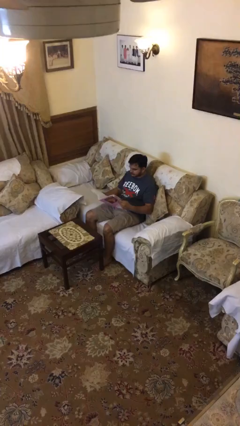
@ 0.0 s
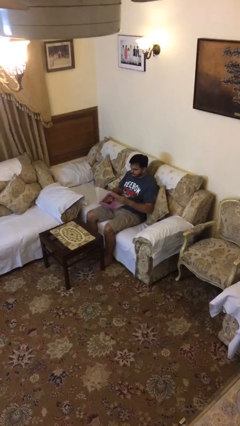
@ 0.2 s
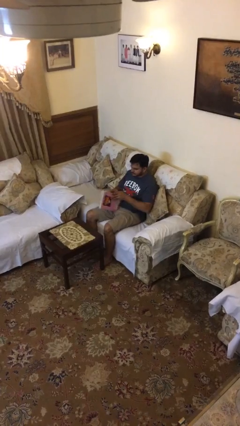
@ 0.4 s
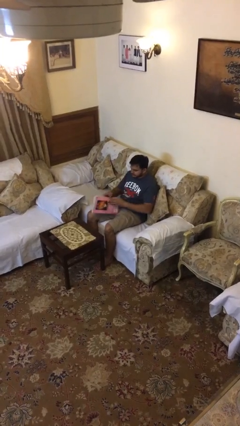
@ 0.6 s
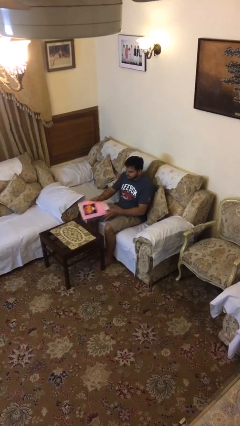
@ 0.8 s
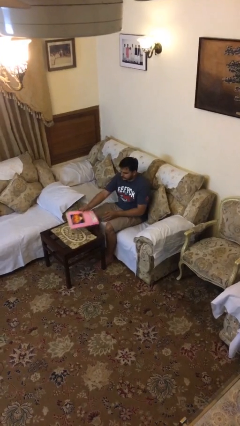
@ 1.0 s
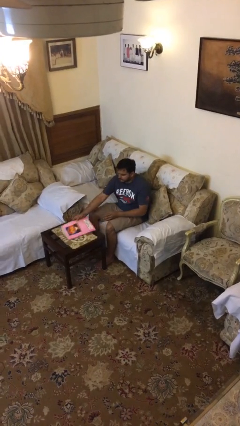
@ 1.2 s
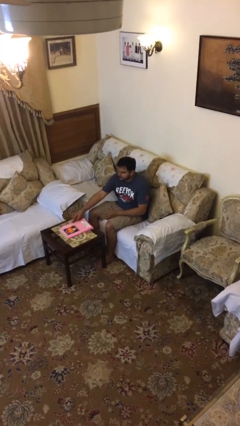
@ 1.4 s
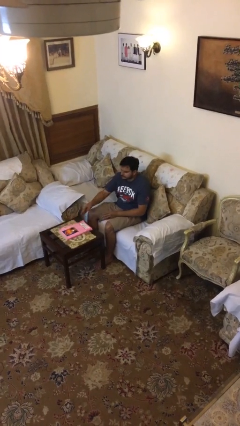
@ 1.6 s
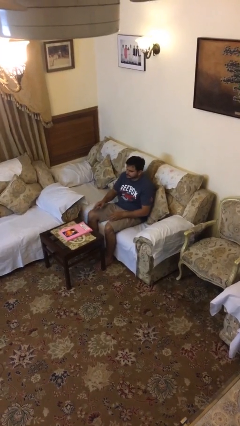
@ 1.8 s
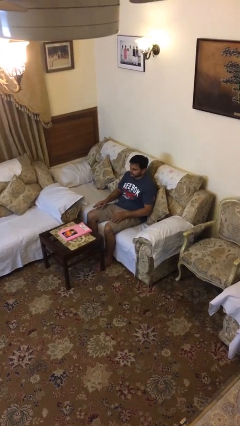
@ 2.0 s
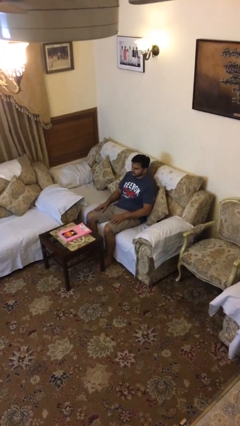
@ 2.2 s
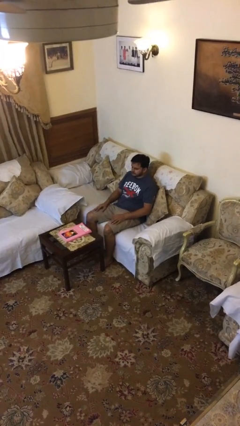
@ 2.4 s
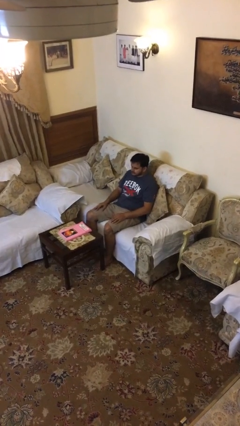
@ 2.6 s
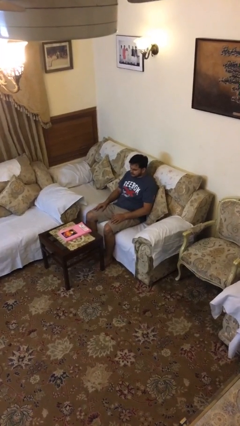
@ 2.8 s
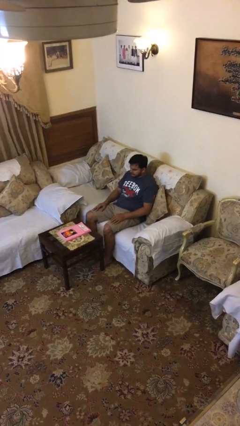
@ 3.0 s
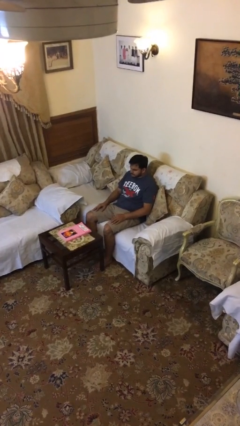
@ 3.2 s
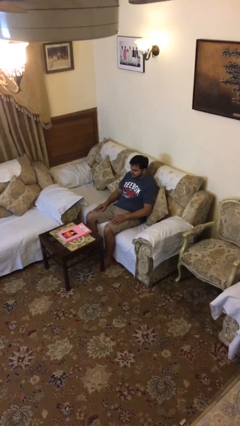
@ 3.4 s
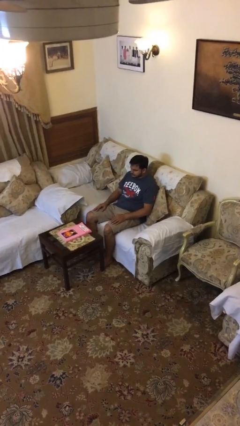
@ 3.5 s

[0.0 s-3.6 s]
person puts down object on table

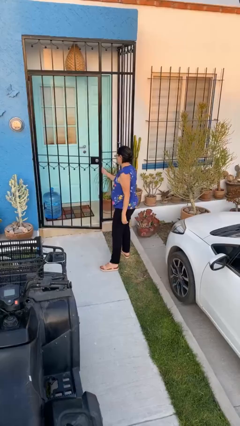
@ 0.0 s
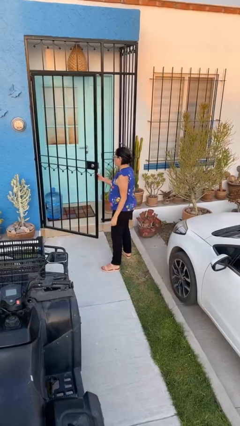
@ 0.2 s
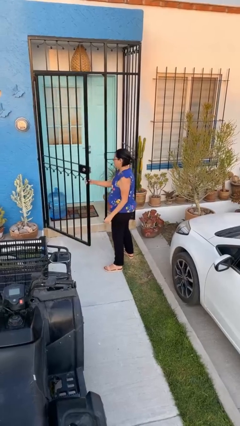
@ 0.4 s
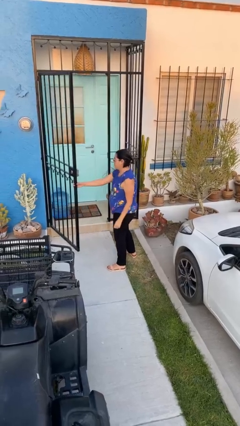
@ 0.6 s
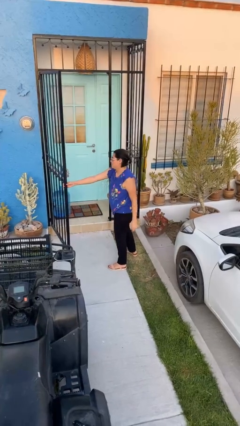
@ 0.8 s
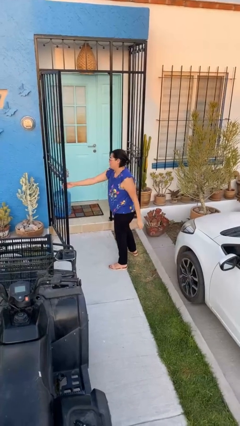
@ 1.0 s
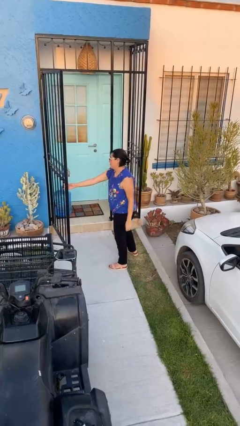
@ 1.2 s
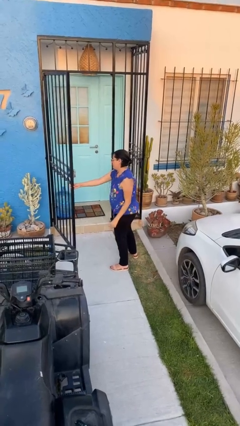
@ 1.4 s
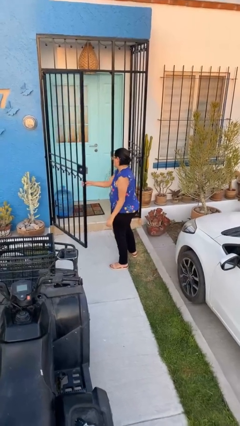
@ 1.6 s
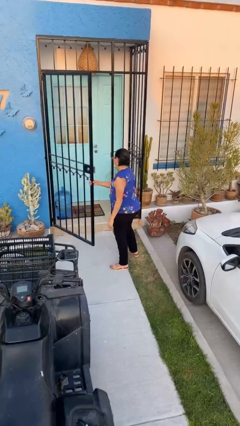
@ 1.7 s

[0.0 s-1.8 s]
person opens facility door

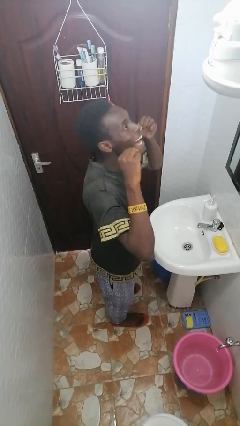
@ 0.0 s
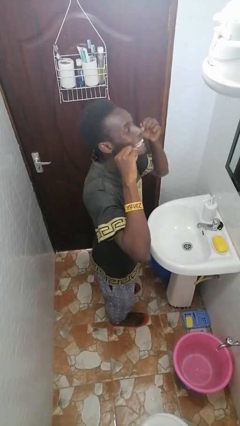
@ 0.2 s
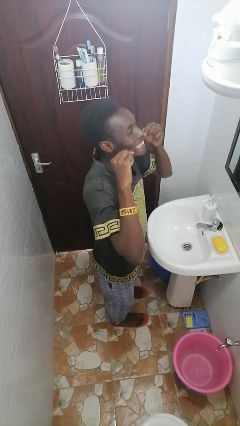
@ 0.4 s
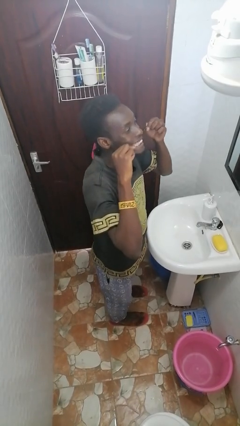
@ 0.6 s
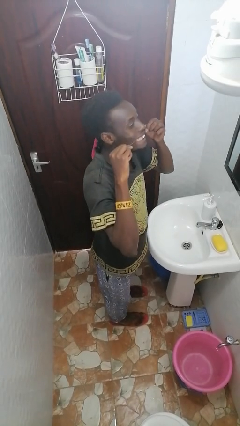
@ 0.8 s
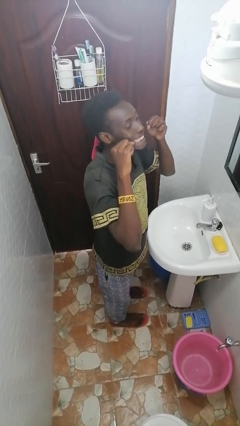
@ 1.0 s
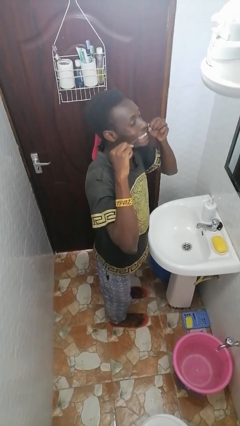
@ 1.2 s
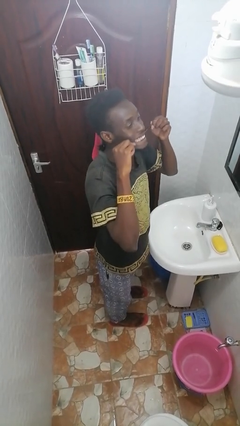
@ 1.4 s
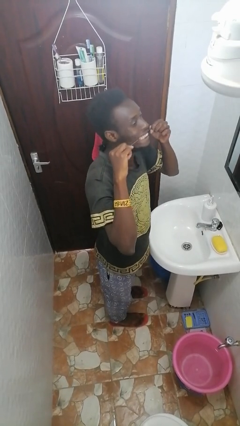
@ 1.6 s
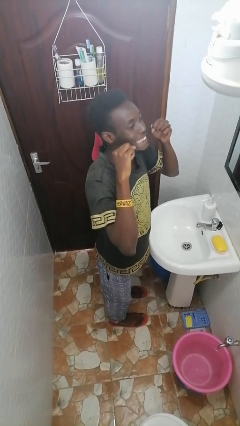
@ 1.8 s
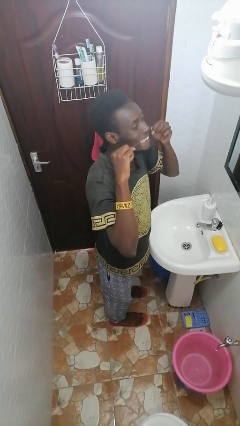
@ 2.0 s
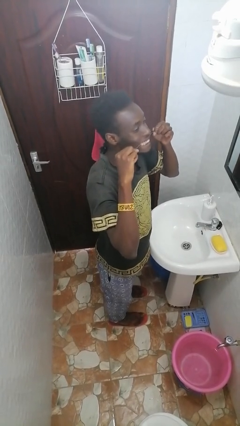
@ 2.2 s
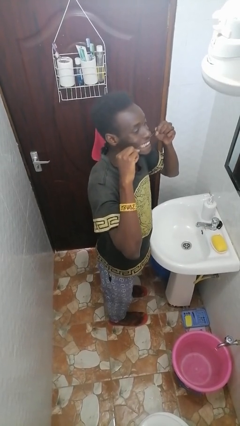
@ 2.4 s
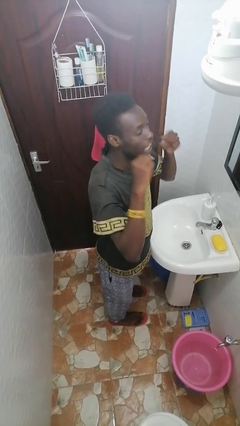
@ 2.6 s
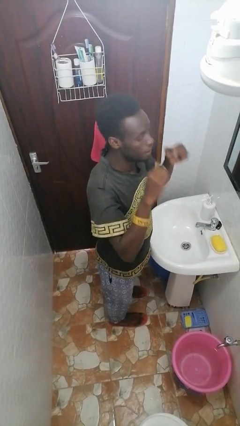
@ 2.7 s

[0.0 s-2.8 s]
person flosses

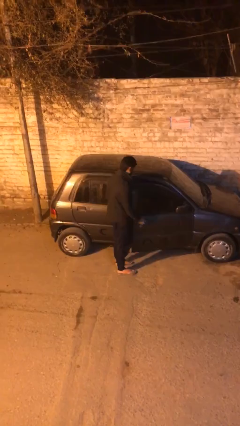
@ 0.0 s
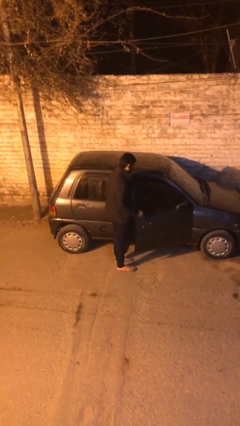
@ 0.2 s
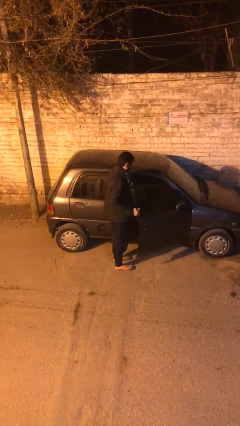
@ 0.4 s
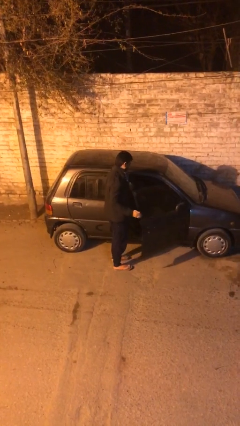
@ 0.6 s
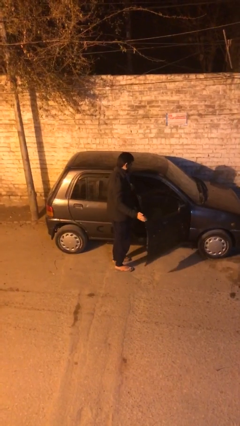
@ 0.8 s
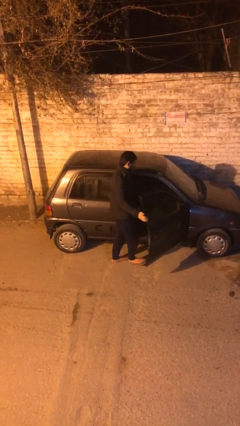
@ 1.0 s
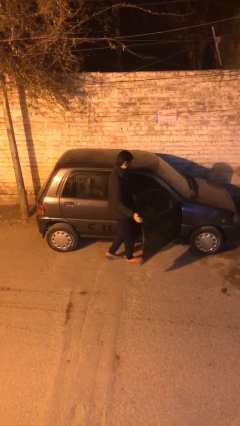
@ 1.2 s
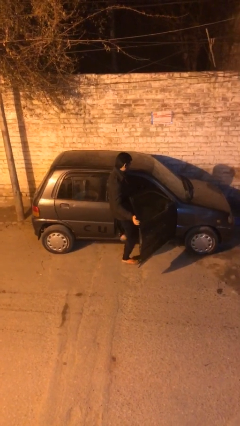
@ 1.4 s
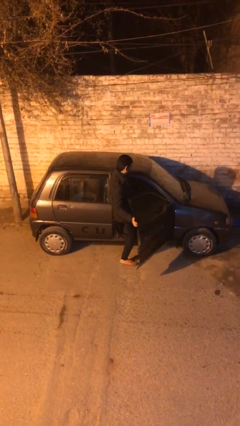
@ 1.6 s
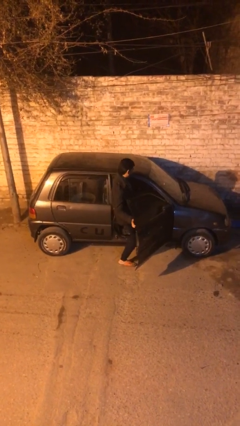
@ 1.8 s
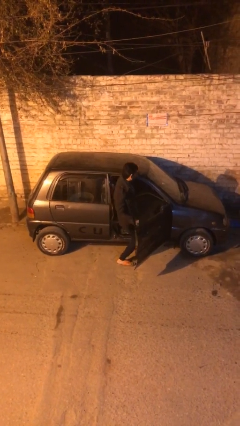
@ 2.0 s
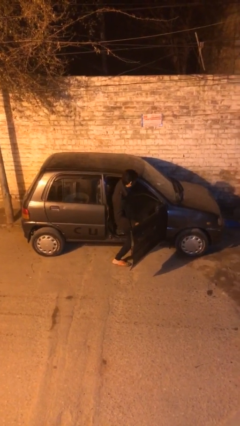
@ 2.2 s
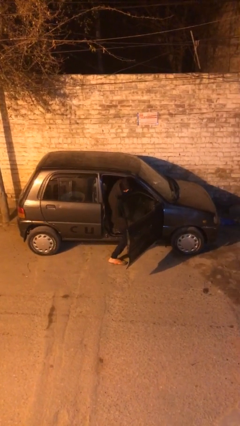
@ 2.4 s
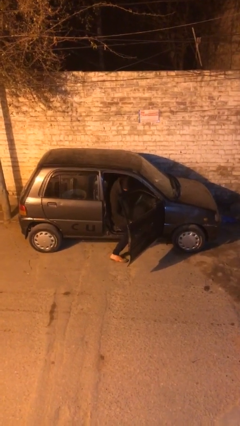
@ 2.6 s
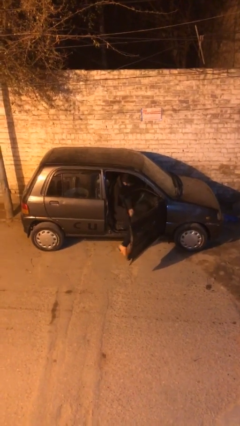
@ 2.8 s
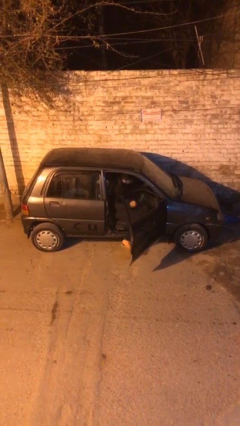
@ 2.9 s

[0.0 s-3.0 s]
person enters car

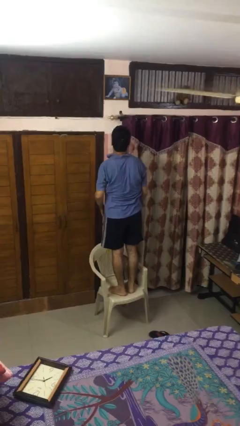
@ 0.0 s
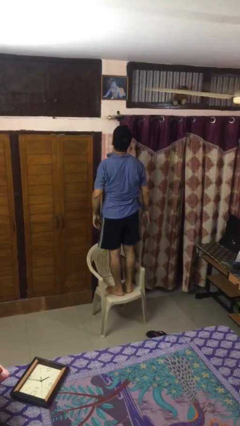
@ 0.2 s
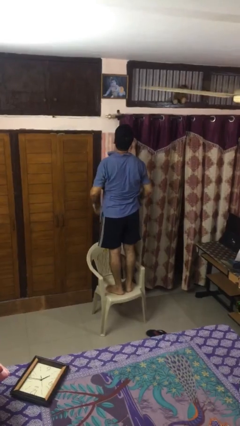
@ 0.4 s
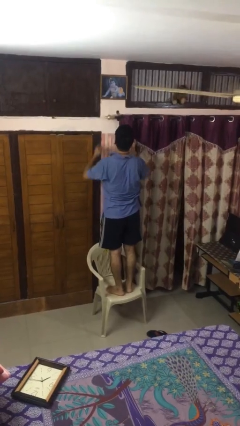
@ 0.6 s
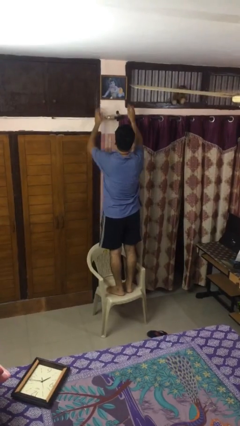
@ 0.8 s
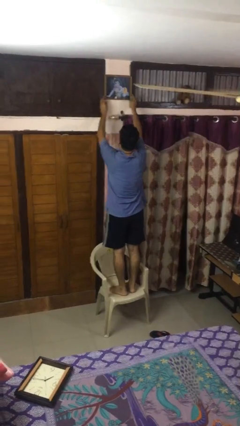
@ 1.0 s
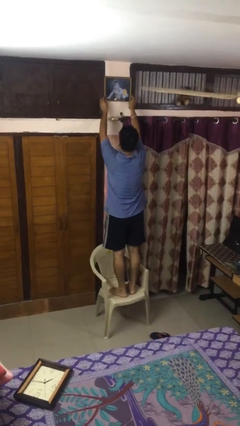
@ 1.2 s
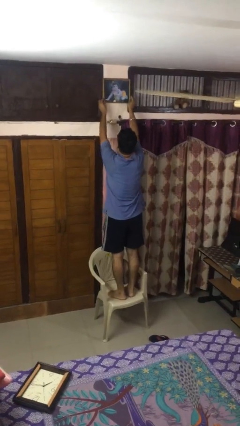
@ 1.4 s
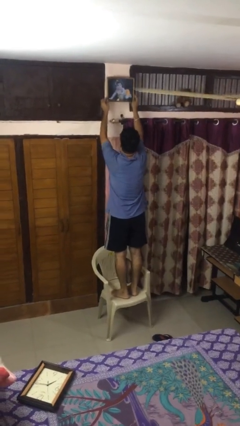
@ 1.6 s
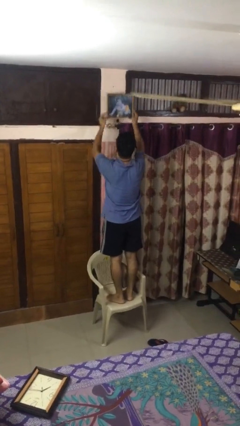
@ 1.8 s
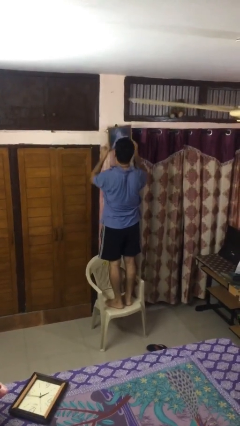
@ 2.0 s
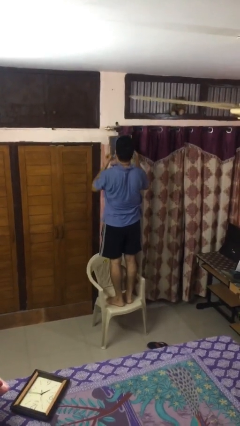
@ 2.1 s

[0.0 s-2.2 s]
person takes down picture frame

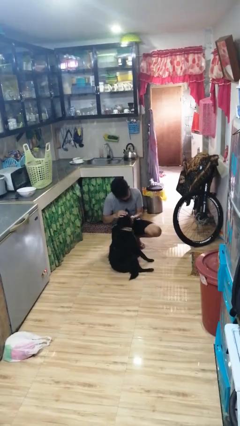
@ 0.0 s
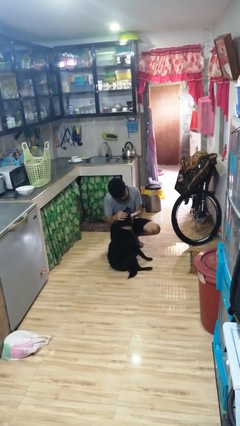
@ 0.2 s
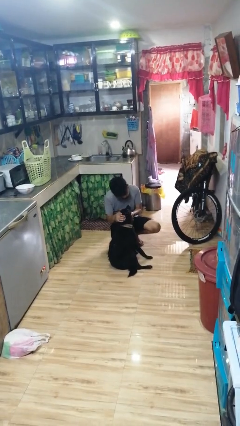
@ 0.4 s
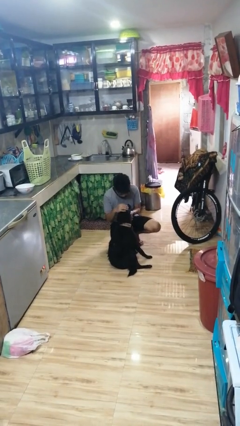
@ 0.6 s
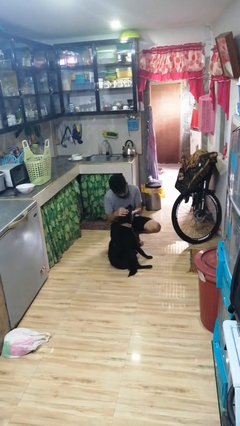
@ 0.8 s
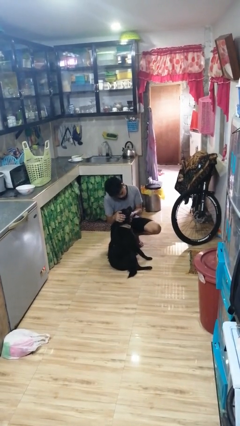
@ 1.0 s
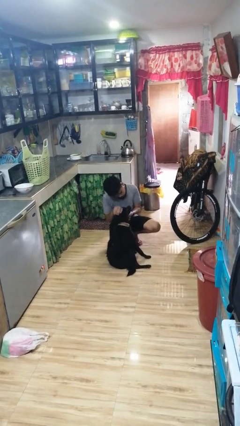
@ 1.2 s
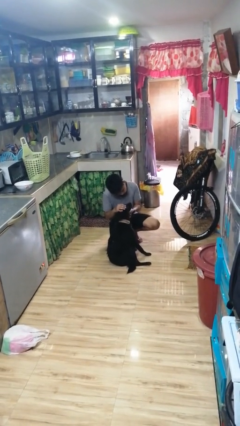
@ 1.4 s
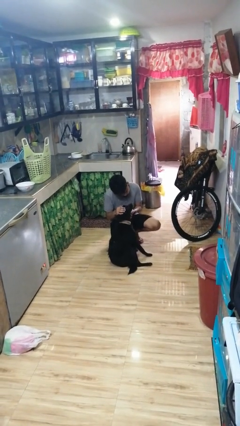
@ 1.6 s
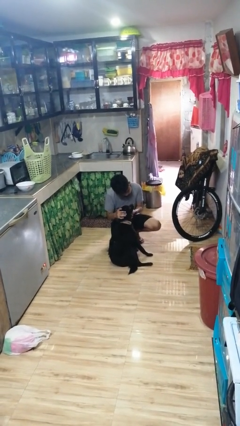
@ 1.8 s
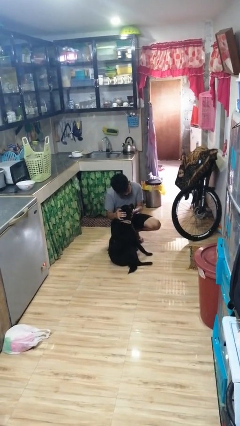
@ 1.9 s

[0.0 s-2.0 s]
person pets dog

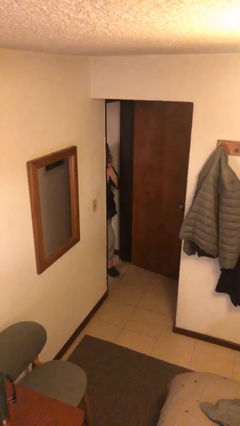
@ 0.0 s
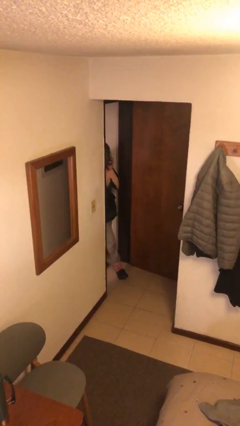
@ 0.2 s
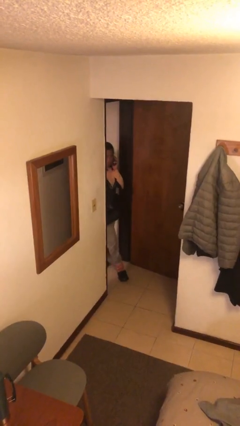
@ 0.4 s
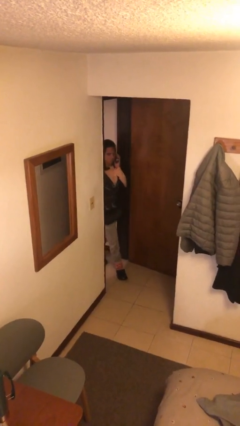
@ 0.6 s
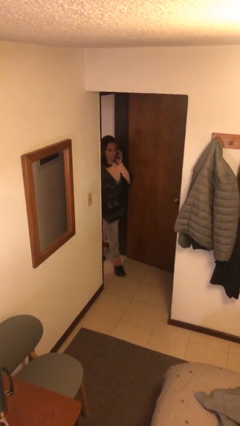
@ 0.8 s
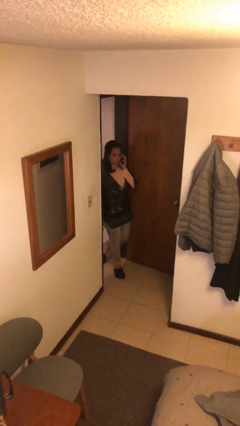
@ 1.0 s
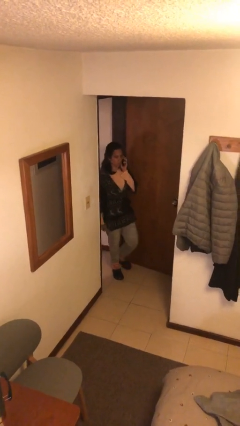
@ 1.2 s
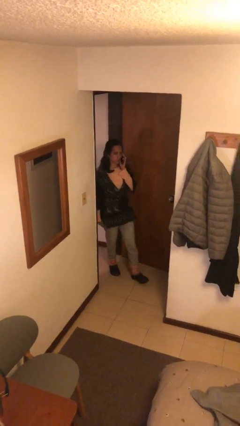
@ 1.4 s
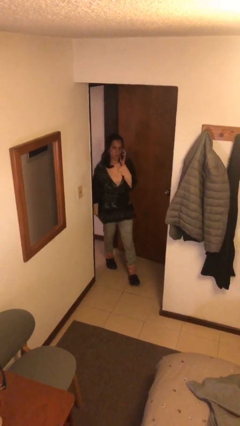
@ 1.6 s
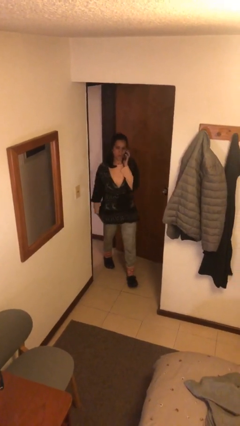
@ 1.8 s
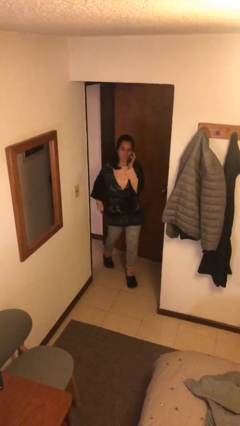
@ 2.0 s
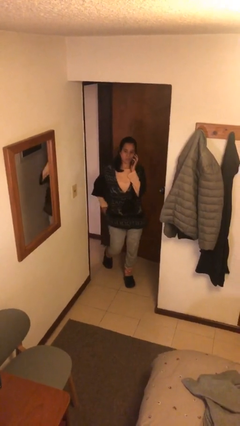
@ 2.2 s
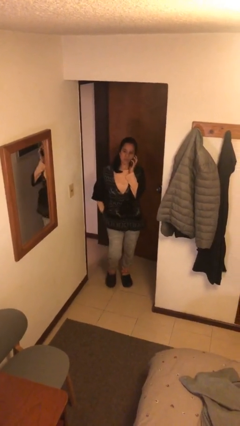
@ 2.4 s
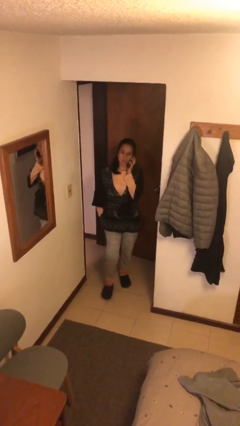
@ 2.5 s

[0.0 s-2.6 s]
person enters scene through structure
